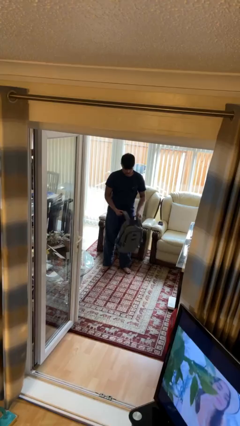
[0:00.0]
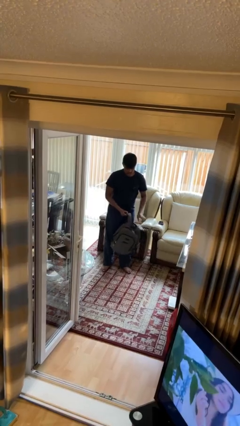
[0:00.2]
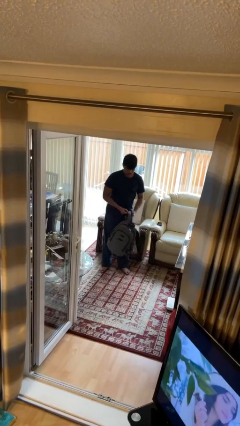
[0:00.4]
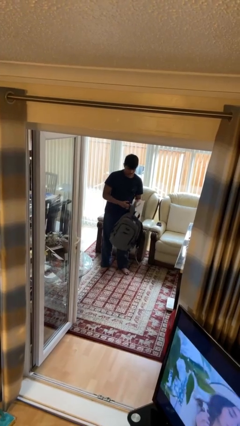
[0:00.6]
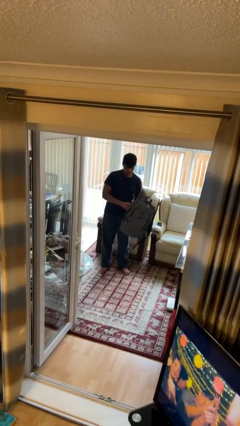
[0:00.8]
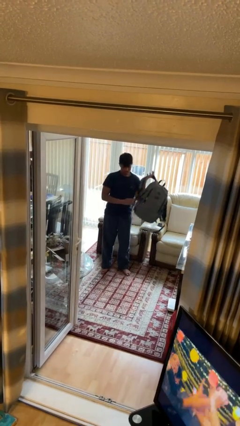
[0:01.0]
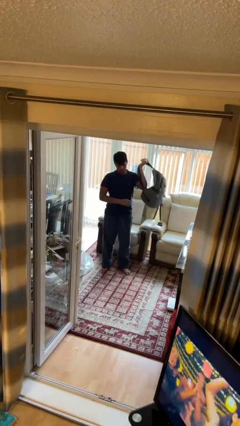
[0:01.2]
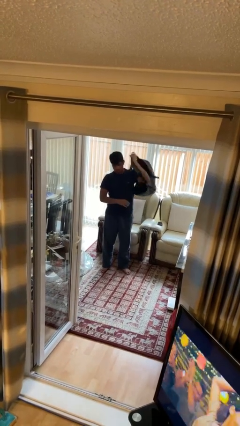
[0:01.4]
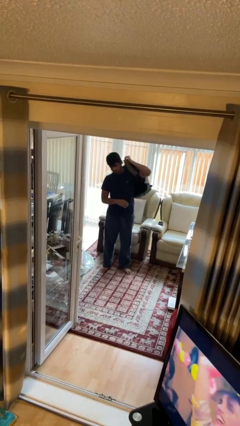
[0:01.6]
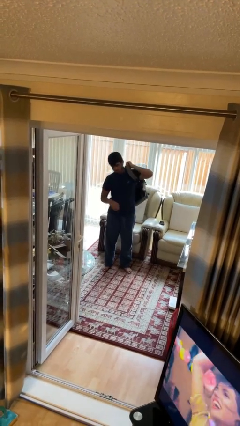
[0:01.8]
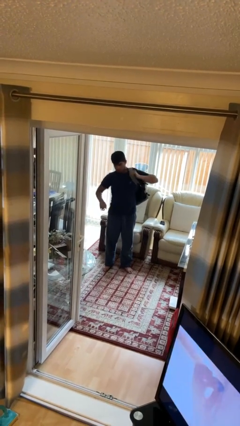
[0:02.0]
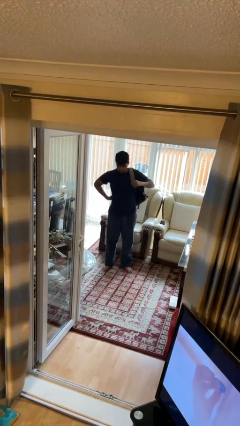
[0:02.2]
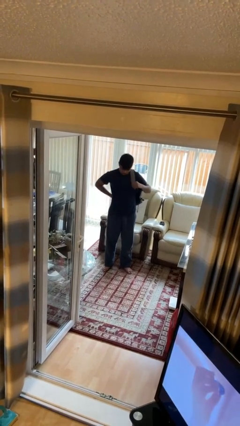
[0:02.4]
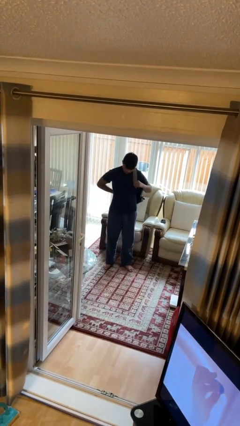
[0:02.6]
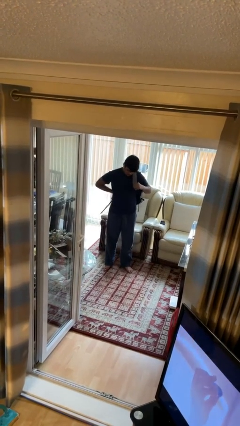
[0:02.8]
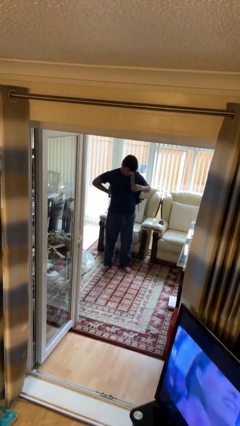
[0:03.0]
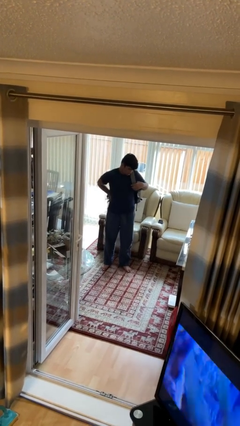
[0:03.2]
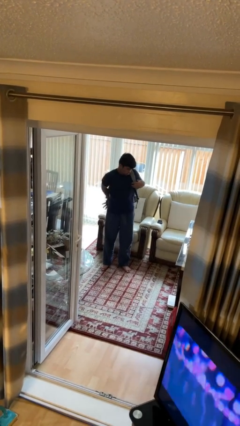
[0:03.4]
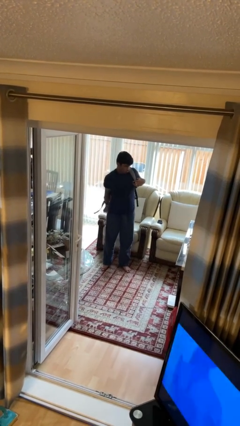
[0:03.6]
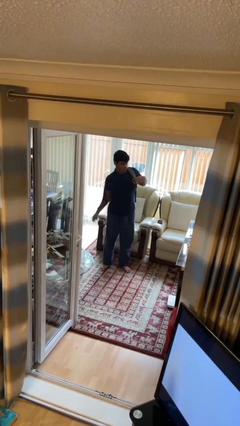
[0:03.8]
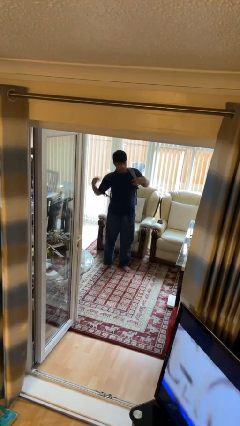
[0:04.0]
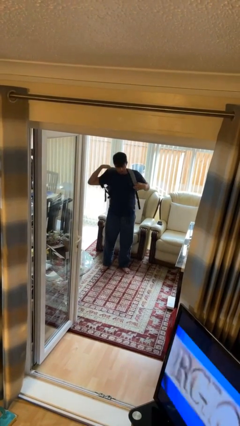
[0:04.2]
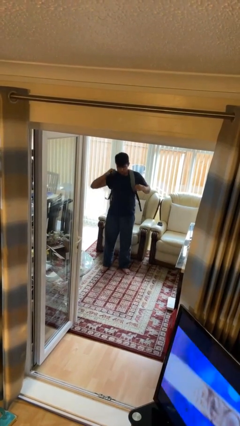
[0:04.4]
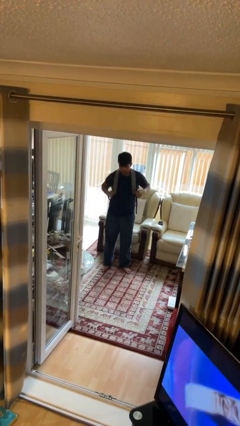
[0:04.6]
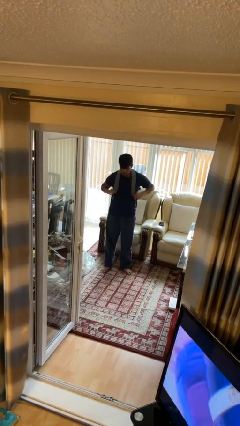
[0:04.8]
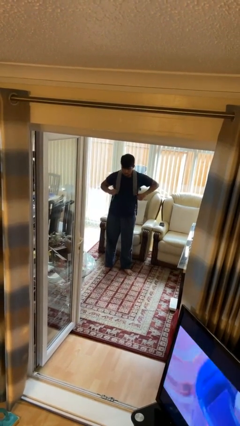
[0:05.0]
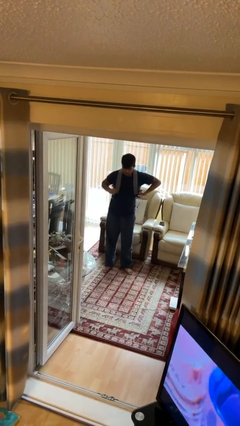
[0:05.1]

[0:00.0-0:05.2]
person puts on backpack

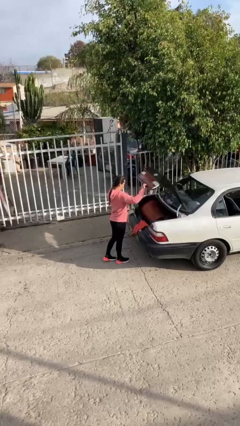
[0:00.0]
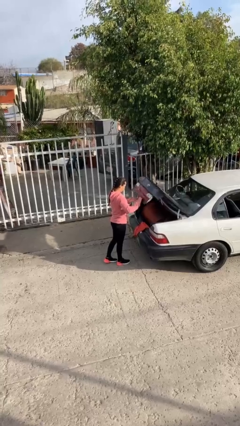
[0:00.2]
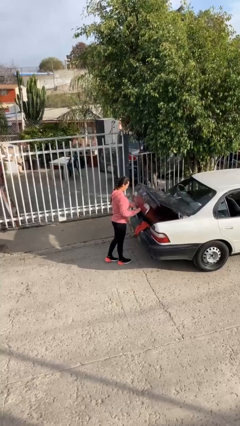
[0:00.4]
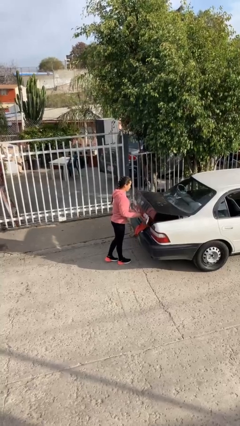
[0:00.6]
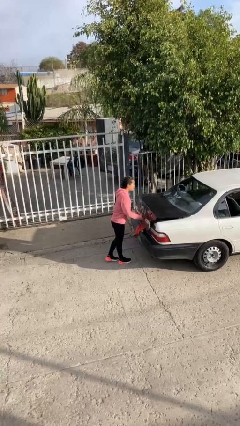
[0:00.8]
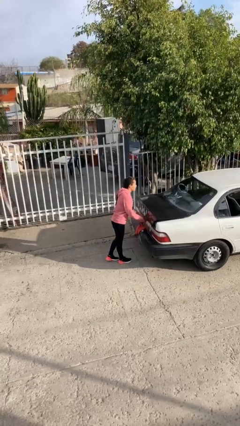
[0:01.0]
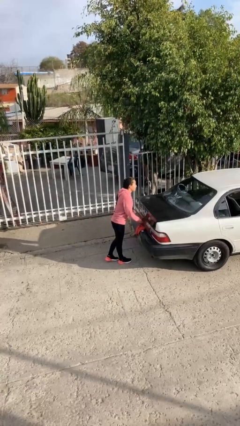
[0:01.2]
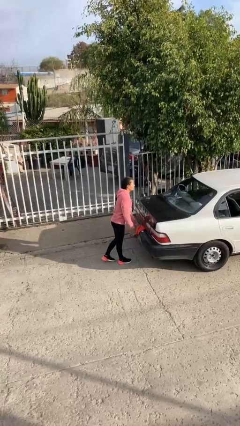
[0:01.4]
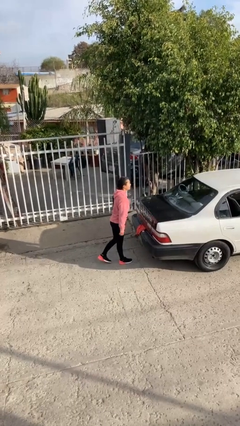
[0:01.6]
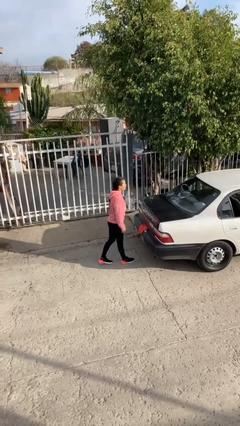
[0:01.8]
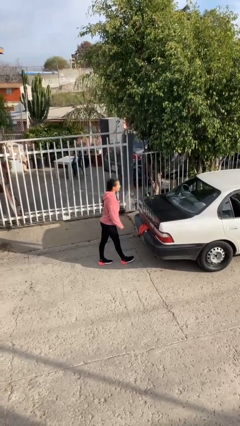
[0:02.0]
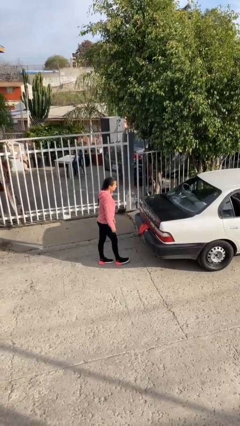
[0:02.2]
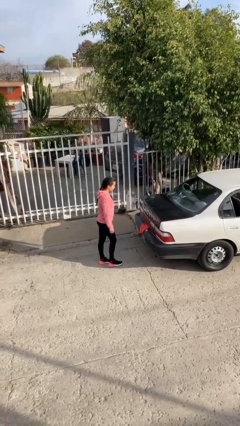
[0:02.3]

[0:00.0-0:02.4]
person closes car trunk

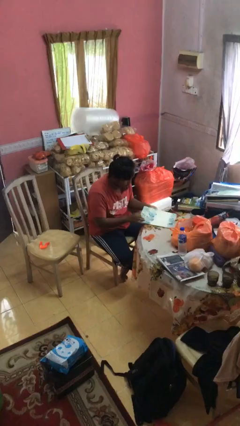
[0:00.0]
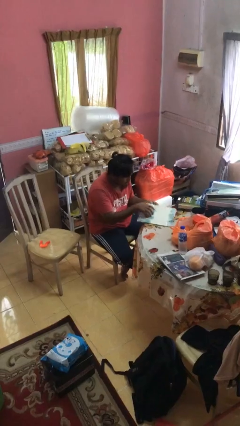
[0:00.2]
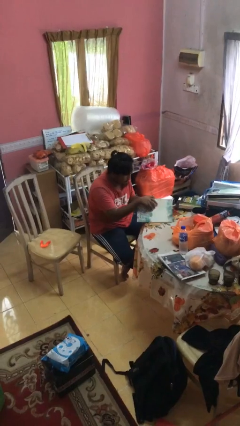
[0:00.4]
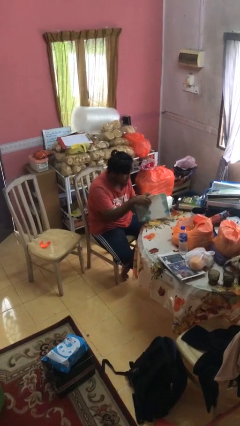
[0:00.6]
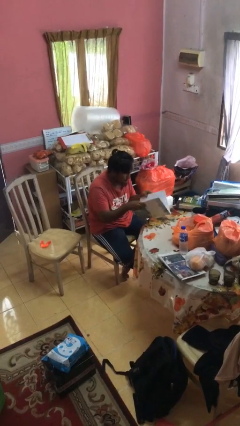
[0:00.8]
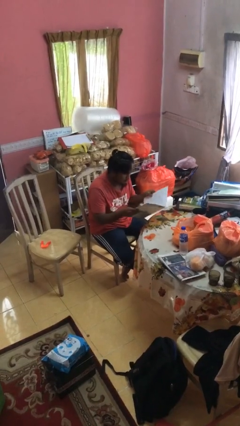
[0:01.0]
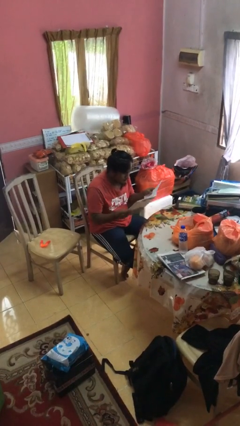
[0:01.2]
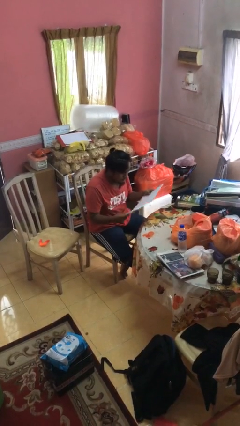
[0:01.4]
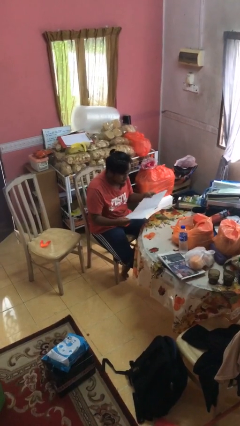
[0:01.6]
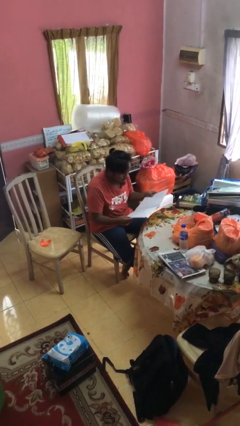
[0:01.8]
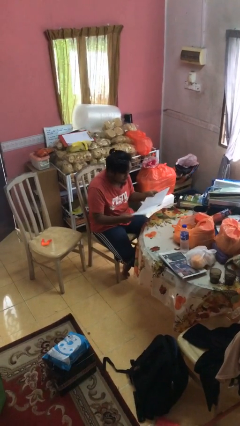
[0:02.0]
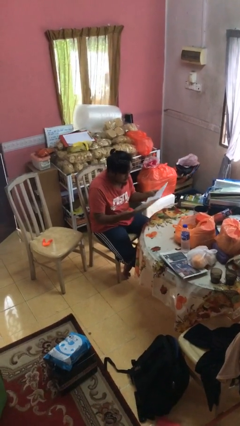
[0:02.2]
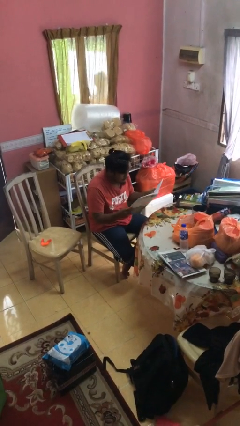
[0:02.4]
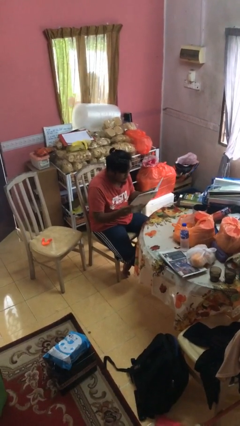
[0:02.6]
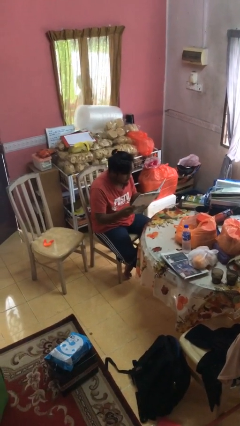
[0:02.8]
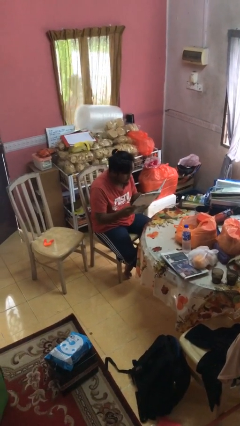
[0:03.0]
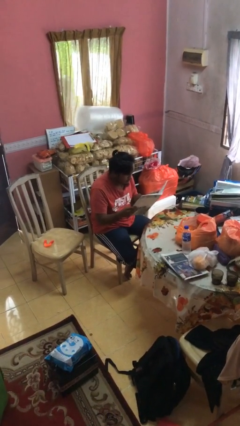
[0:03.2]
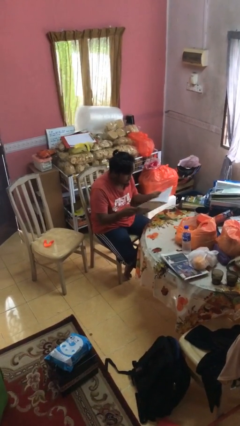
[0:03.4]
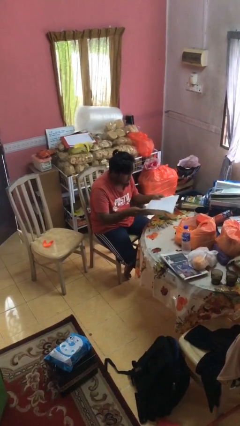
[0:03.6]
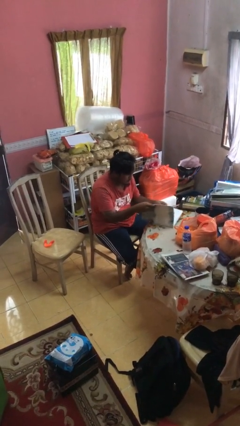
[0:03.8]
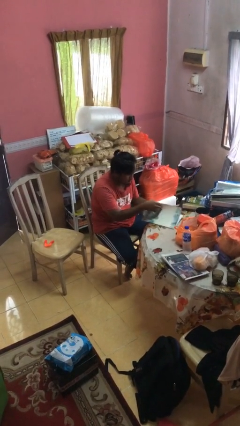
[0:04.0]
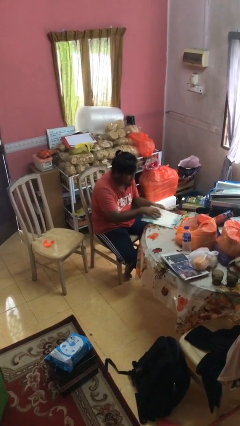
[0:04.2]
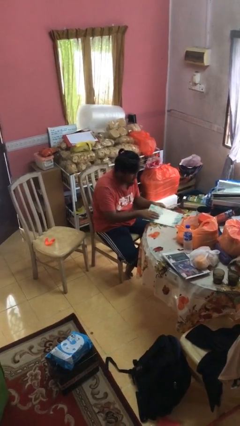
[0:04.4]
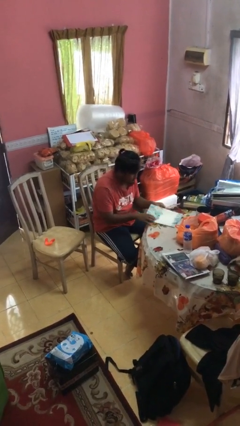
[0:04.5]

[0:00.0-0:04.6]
person reads magazine

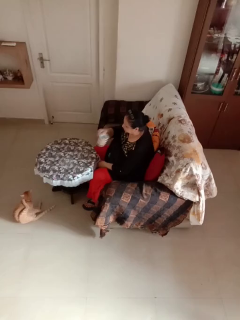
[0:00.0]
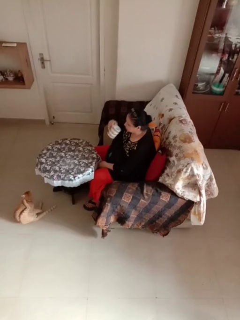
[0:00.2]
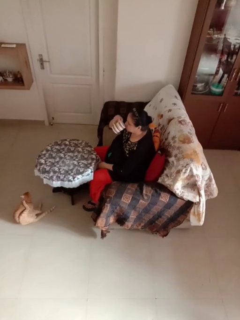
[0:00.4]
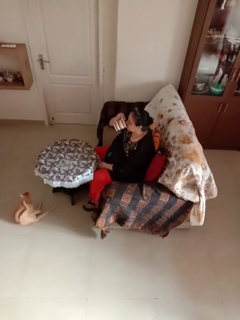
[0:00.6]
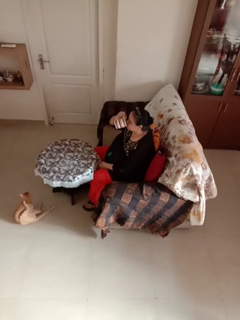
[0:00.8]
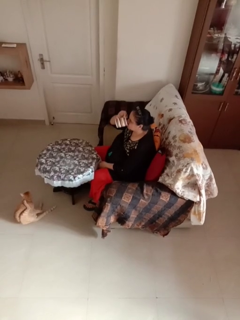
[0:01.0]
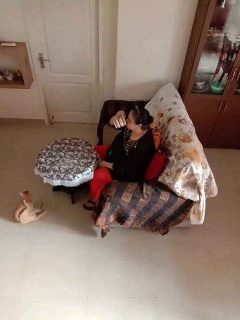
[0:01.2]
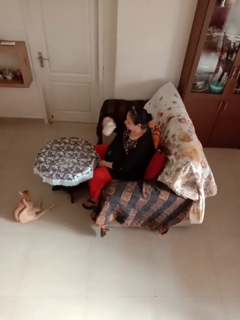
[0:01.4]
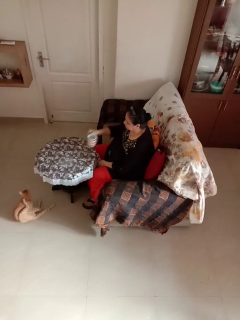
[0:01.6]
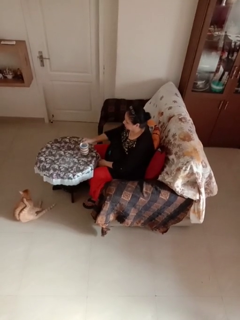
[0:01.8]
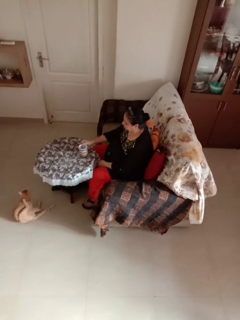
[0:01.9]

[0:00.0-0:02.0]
person drinks from mug

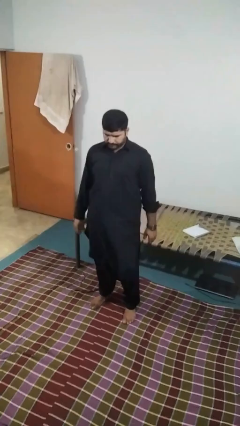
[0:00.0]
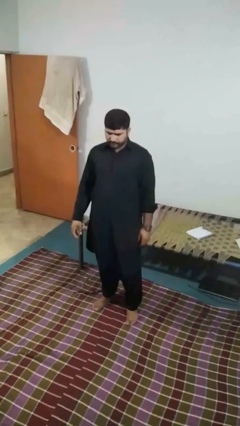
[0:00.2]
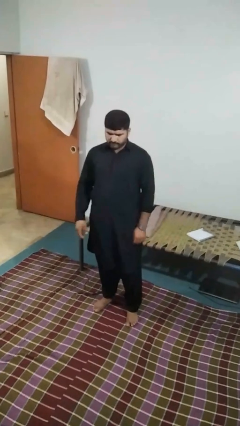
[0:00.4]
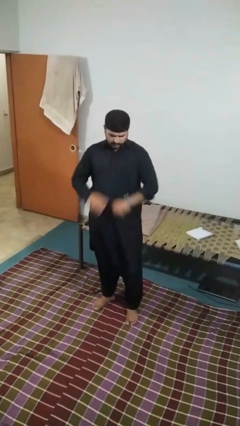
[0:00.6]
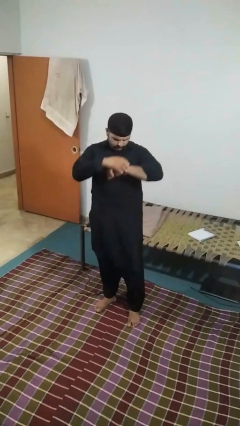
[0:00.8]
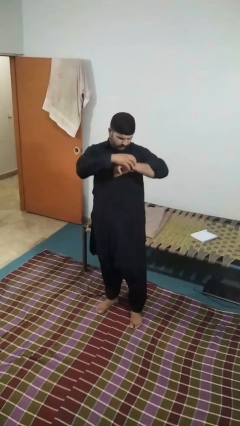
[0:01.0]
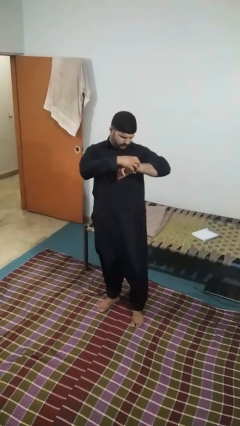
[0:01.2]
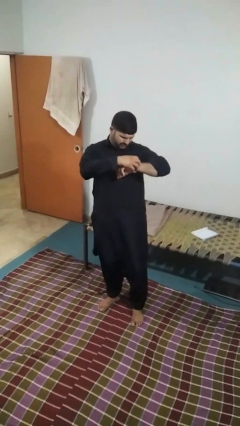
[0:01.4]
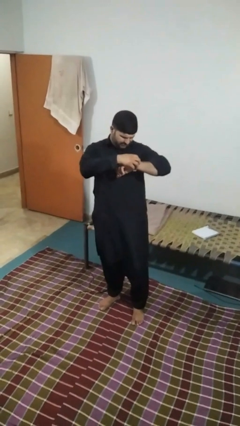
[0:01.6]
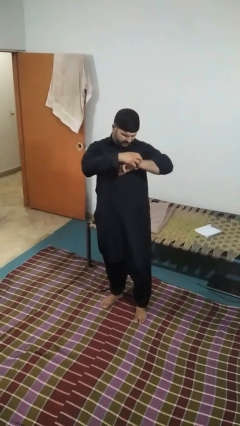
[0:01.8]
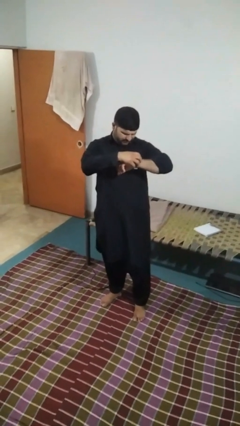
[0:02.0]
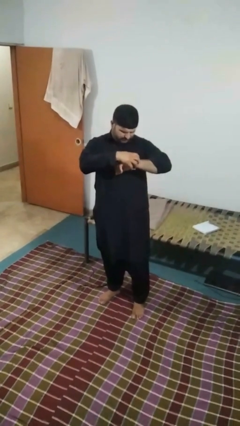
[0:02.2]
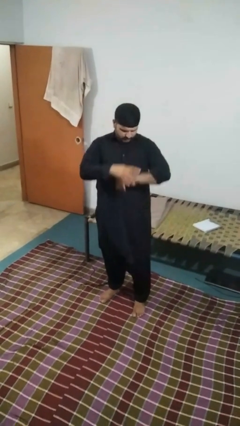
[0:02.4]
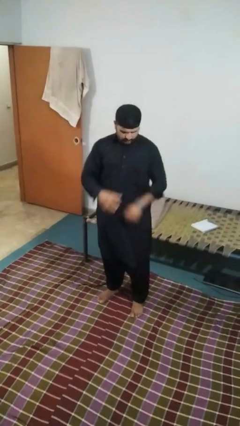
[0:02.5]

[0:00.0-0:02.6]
person looks at wristwatch

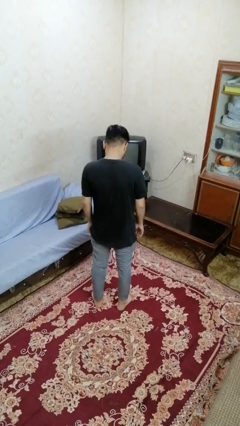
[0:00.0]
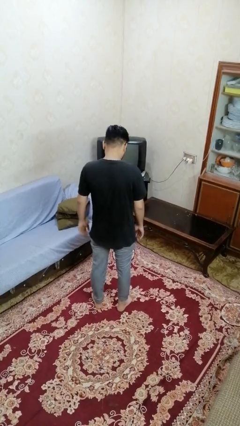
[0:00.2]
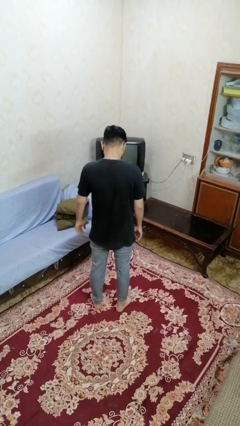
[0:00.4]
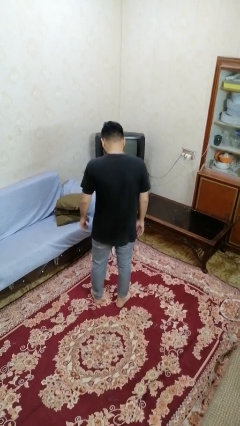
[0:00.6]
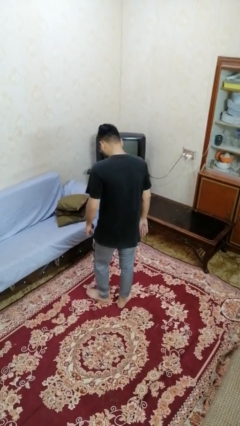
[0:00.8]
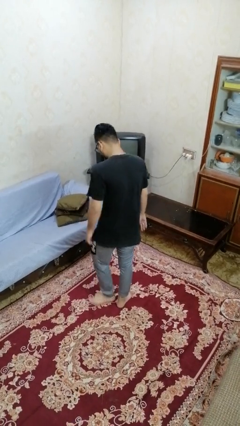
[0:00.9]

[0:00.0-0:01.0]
person twirls
